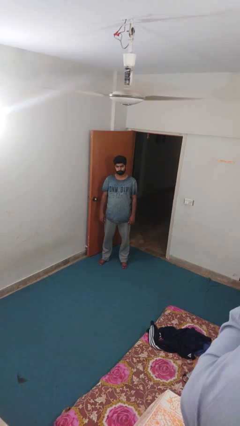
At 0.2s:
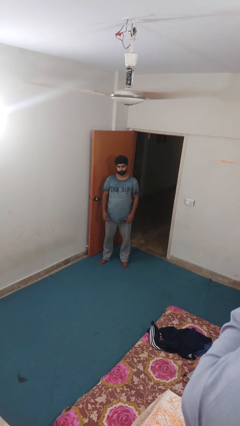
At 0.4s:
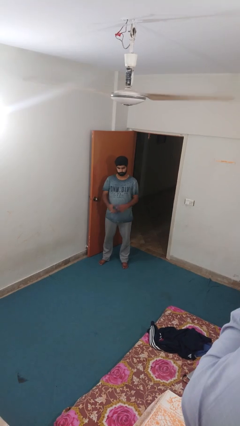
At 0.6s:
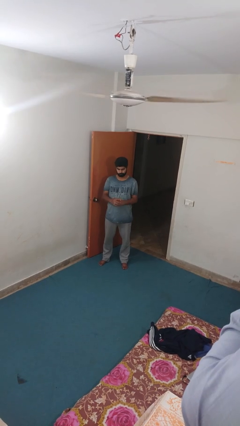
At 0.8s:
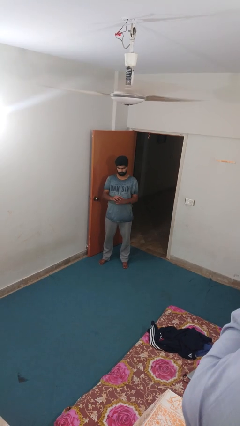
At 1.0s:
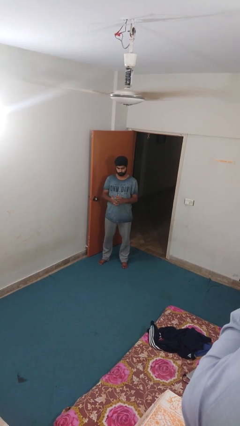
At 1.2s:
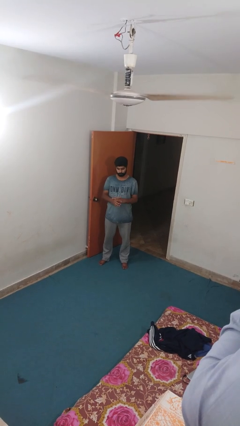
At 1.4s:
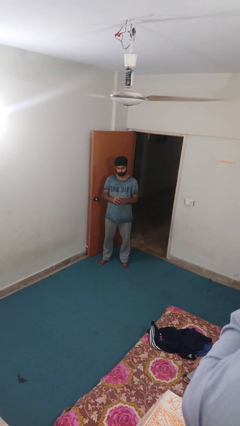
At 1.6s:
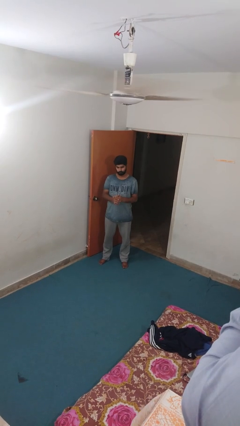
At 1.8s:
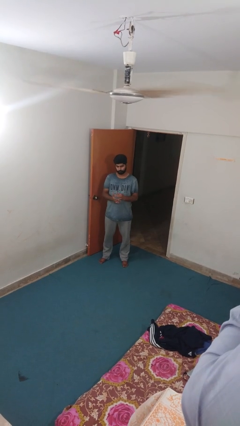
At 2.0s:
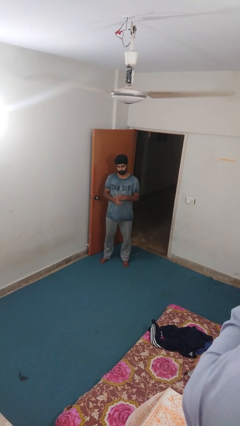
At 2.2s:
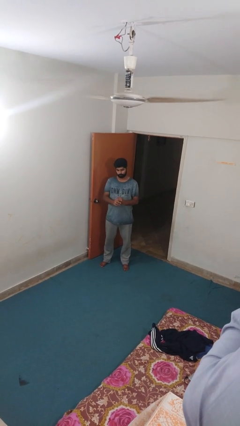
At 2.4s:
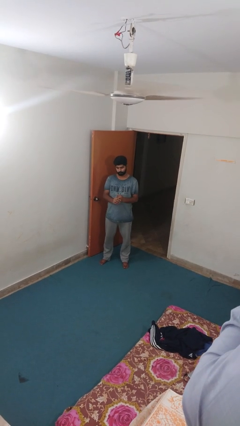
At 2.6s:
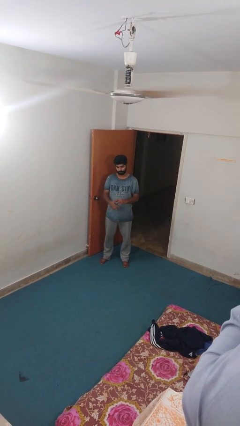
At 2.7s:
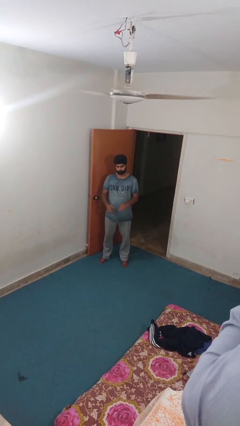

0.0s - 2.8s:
person snaps fingers

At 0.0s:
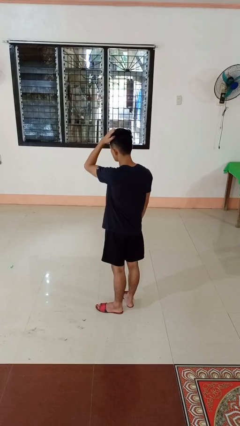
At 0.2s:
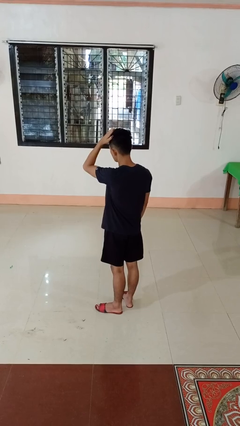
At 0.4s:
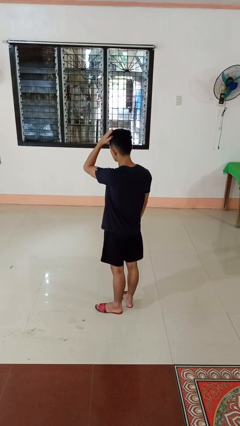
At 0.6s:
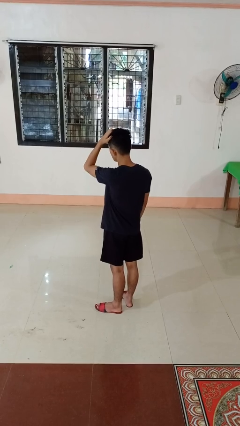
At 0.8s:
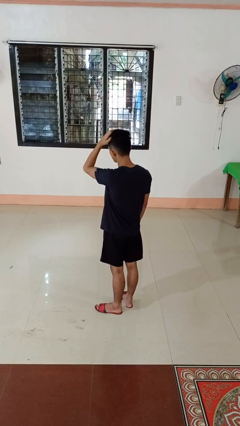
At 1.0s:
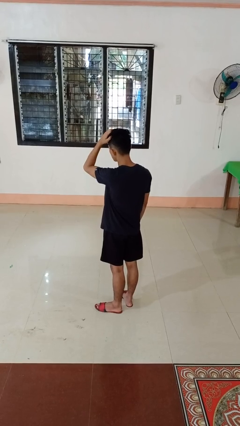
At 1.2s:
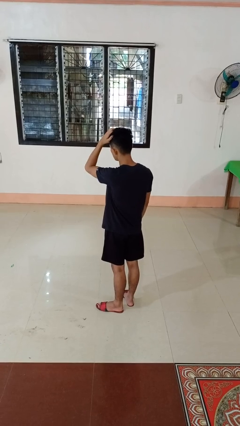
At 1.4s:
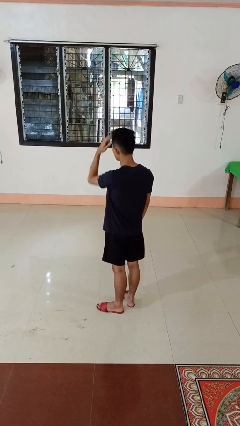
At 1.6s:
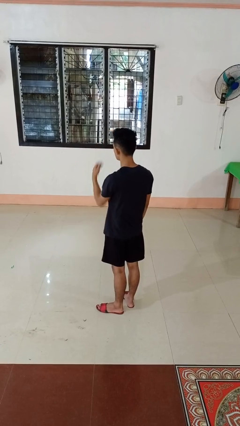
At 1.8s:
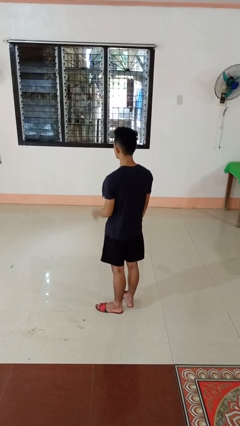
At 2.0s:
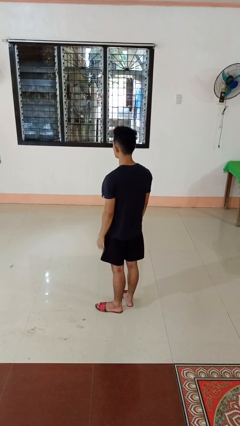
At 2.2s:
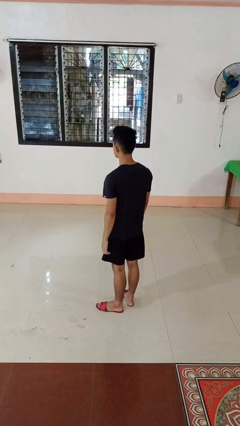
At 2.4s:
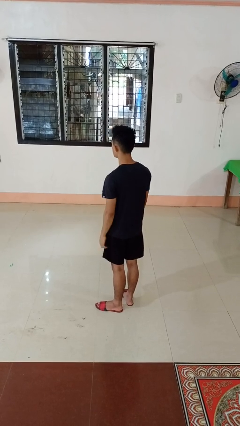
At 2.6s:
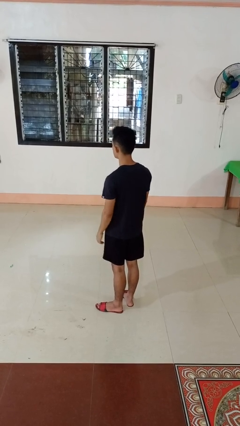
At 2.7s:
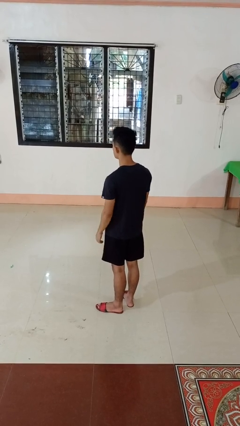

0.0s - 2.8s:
person scratches face

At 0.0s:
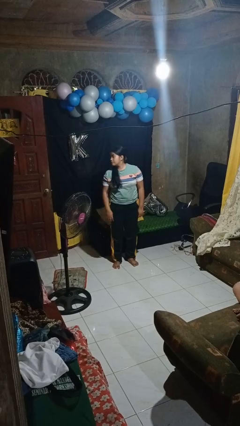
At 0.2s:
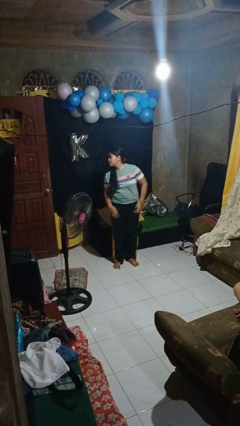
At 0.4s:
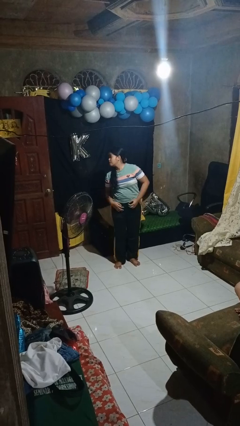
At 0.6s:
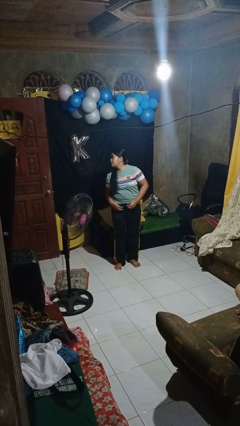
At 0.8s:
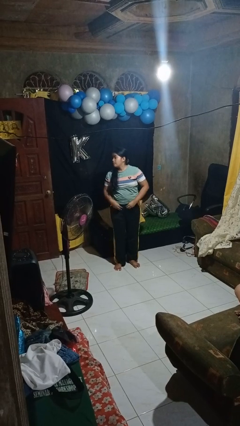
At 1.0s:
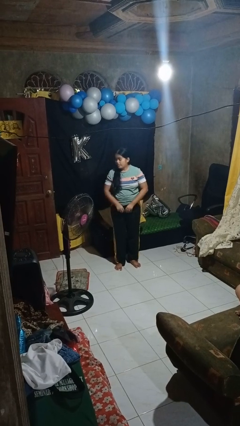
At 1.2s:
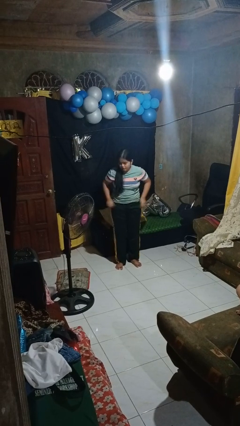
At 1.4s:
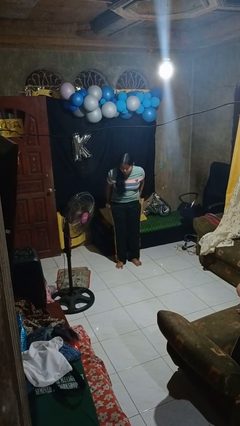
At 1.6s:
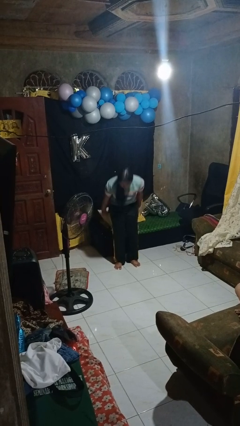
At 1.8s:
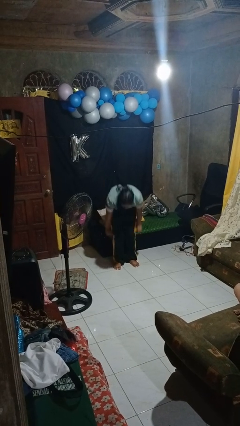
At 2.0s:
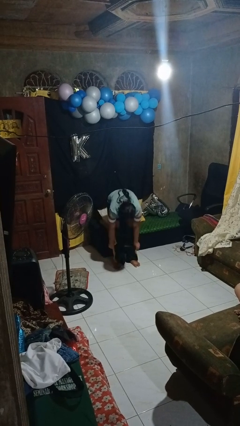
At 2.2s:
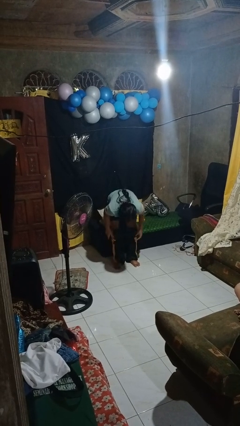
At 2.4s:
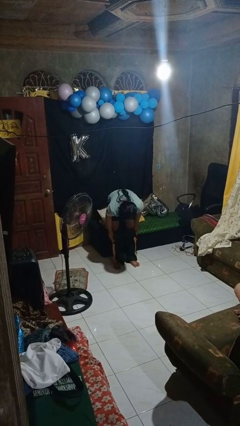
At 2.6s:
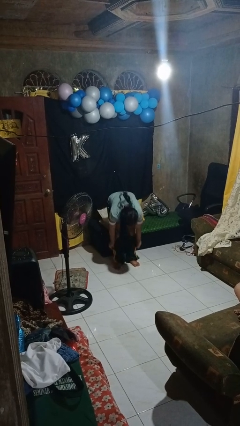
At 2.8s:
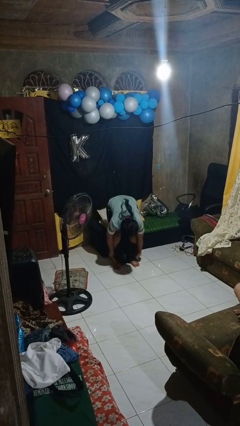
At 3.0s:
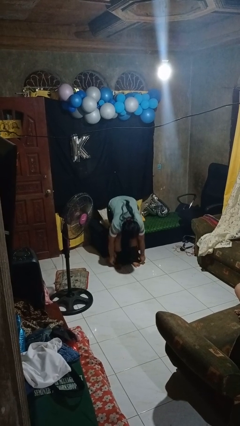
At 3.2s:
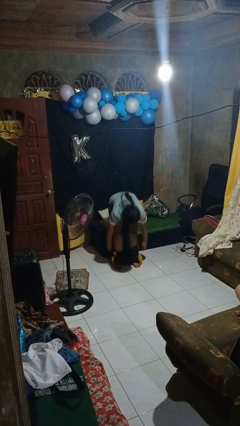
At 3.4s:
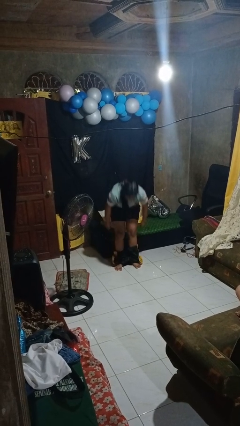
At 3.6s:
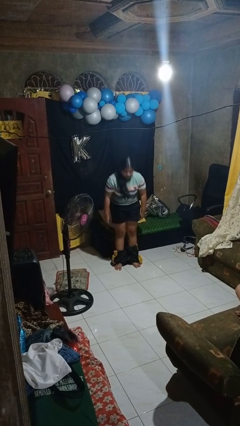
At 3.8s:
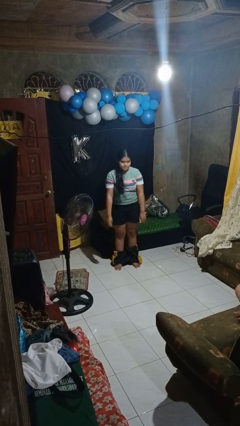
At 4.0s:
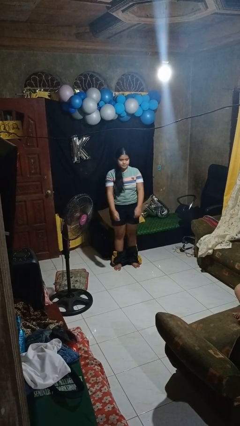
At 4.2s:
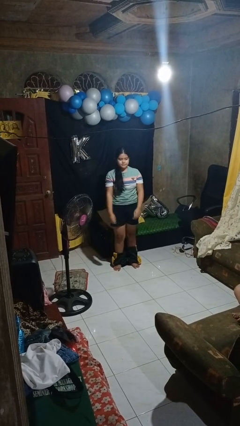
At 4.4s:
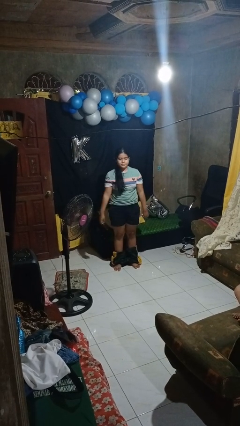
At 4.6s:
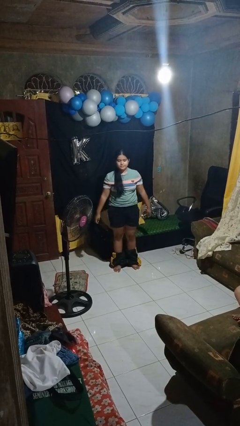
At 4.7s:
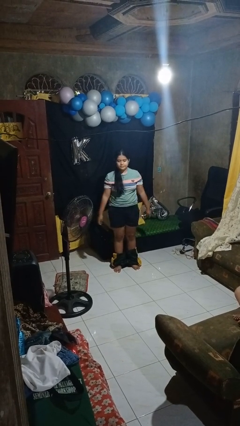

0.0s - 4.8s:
person takes off pants

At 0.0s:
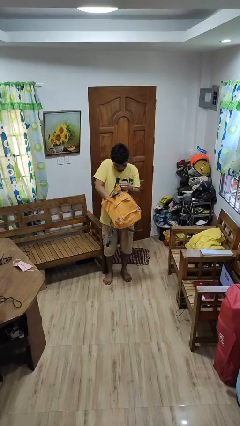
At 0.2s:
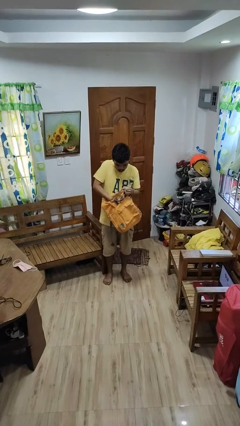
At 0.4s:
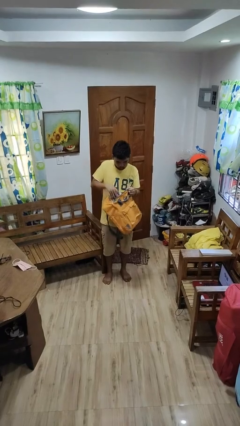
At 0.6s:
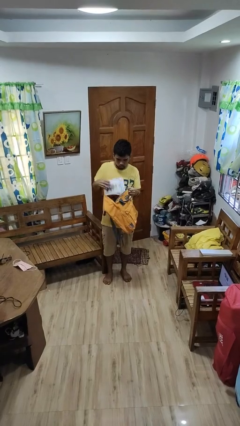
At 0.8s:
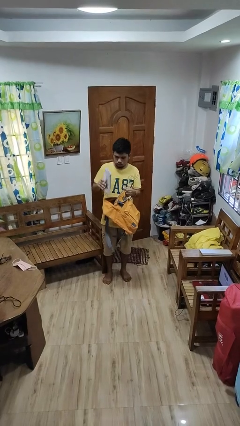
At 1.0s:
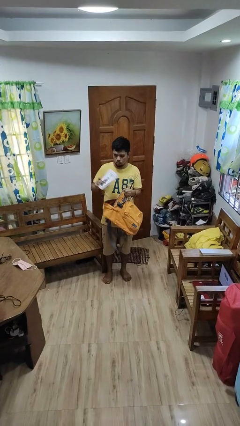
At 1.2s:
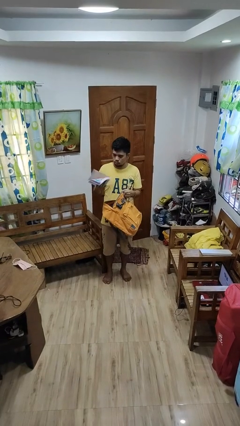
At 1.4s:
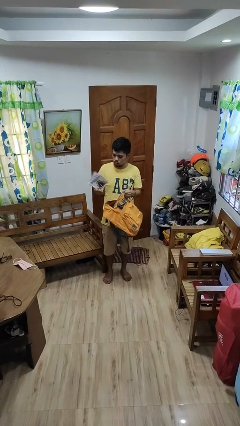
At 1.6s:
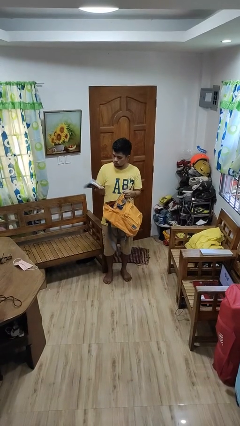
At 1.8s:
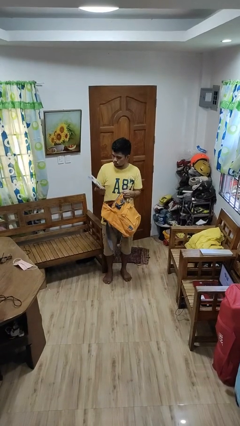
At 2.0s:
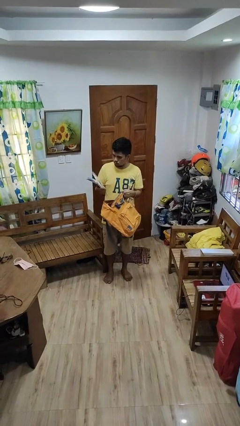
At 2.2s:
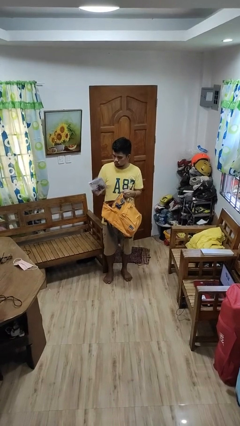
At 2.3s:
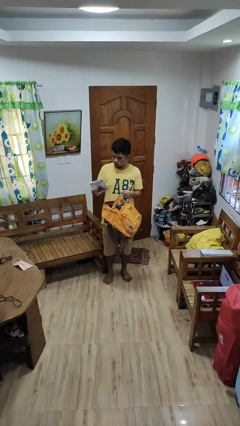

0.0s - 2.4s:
person takes object from backpack

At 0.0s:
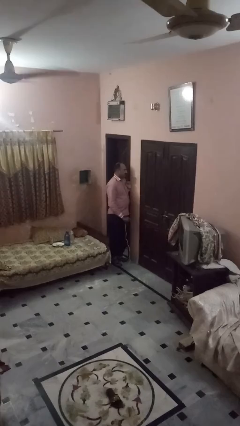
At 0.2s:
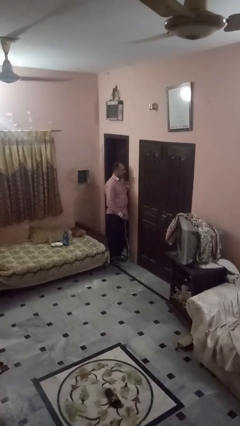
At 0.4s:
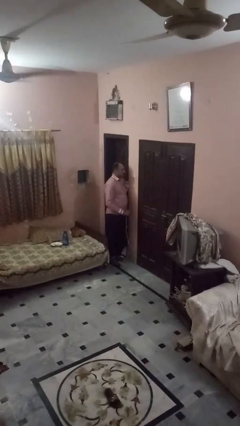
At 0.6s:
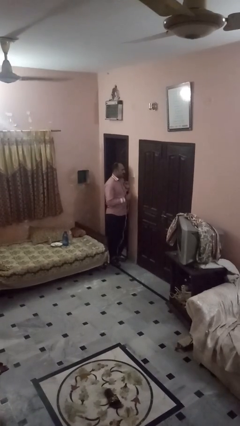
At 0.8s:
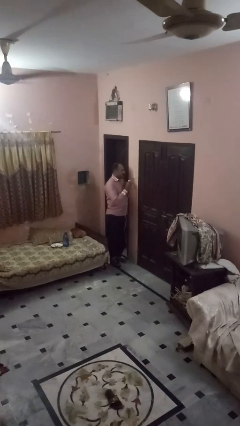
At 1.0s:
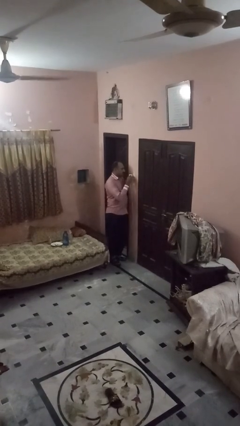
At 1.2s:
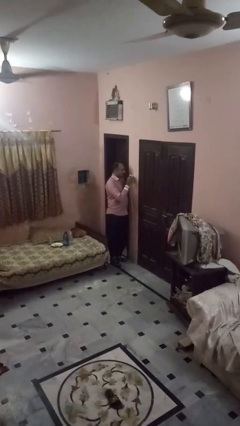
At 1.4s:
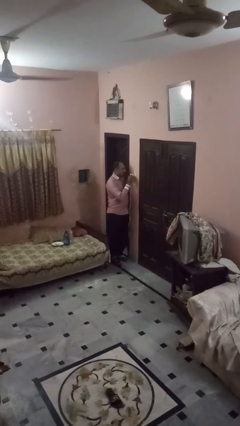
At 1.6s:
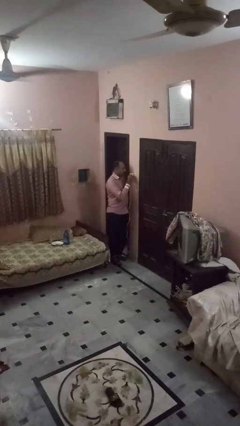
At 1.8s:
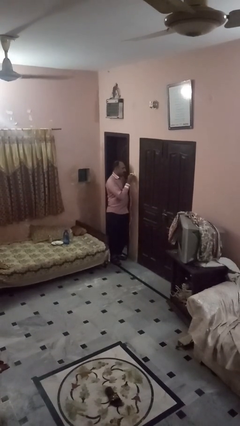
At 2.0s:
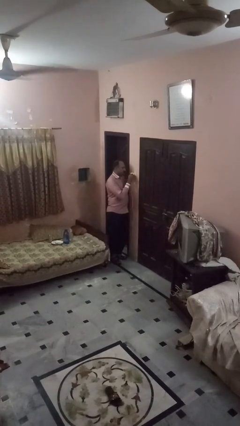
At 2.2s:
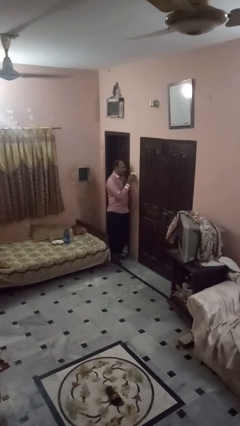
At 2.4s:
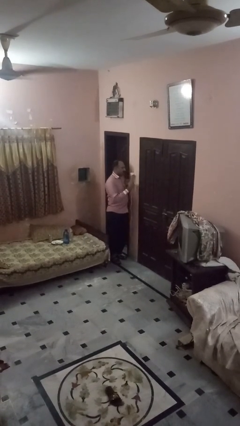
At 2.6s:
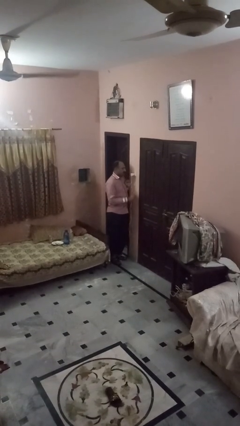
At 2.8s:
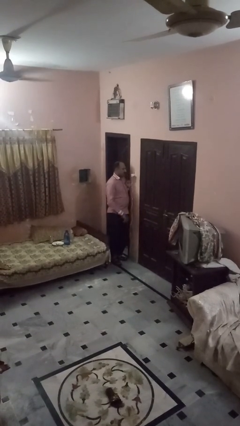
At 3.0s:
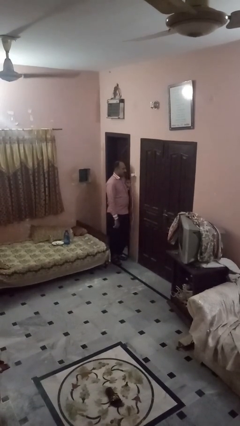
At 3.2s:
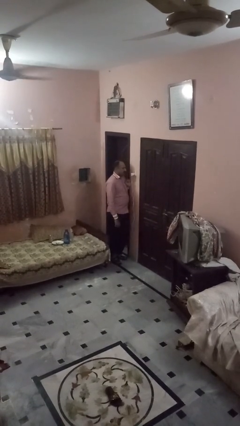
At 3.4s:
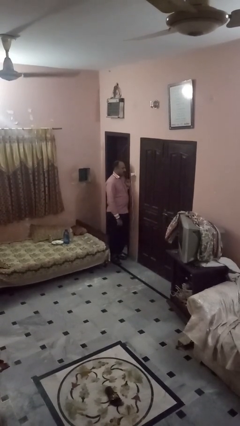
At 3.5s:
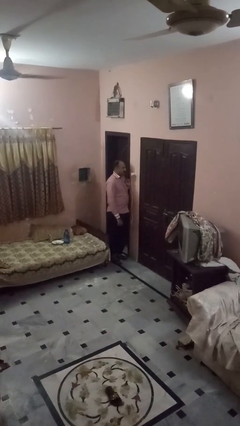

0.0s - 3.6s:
person plugs into electrical socket

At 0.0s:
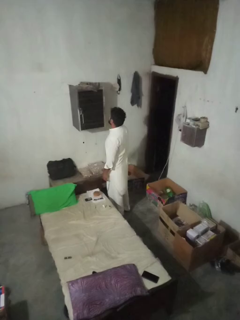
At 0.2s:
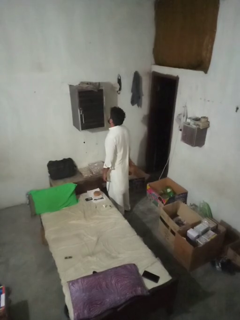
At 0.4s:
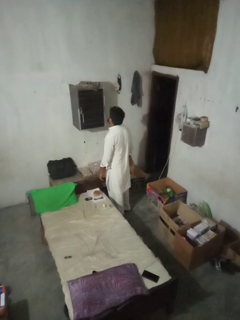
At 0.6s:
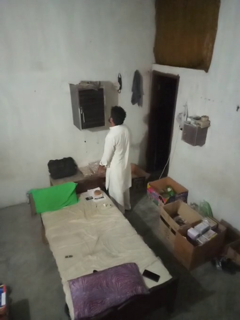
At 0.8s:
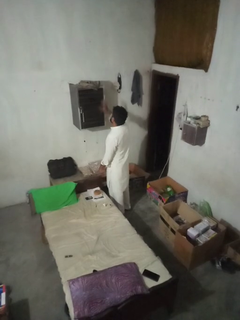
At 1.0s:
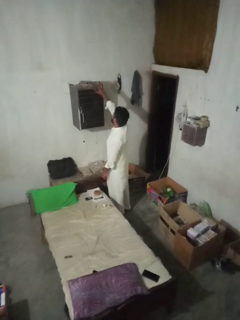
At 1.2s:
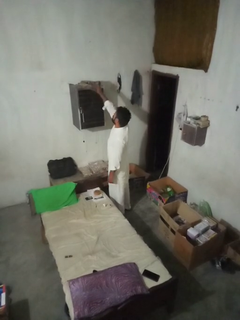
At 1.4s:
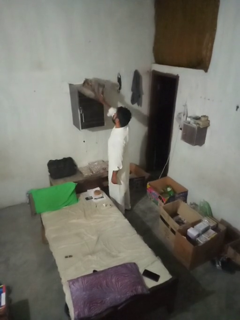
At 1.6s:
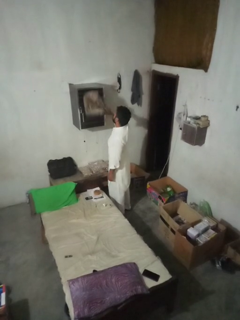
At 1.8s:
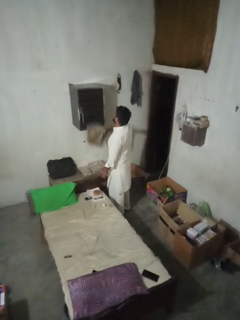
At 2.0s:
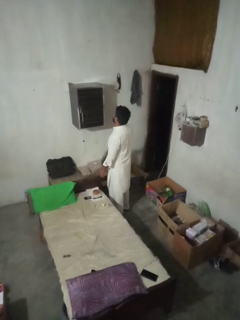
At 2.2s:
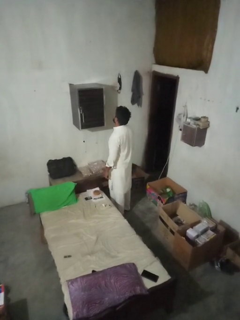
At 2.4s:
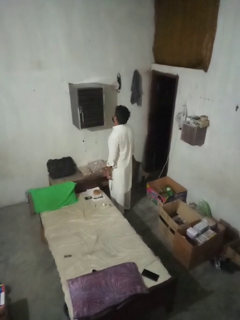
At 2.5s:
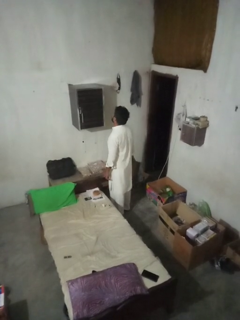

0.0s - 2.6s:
person picks up object from shelf
